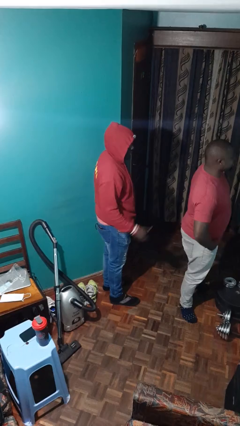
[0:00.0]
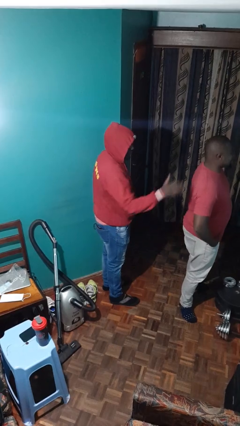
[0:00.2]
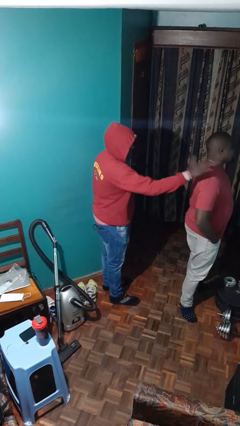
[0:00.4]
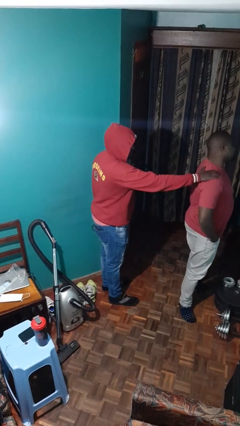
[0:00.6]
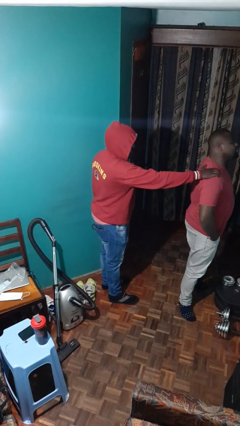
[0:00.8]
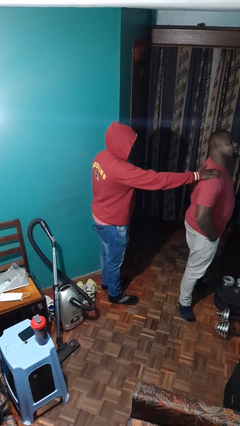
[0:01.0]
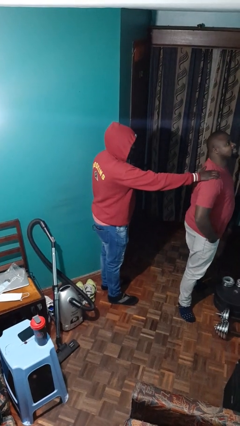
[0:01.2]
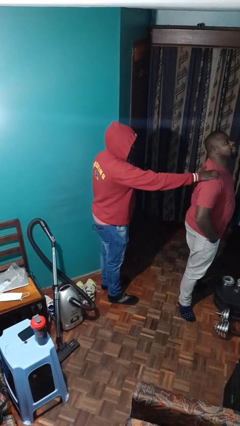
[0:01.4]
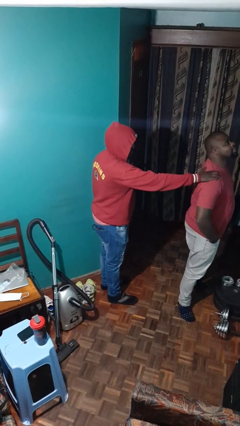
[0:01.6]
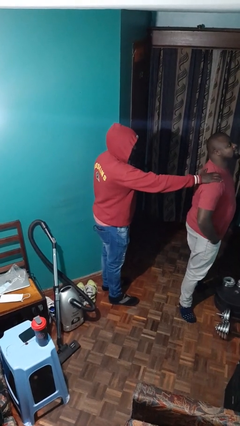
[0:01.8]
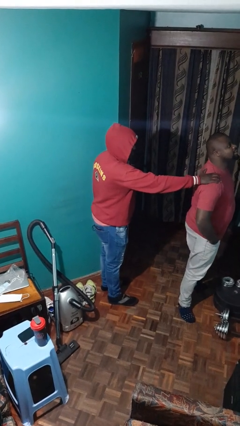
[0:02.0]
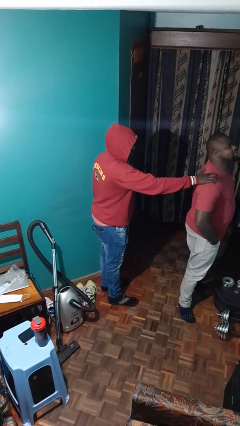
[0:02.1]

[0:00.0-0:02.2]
person grabs person by shoulder

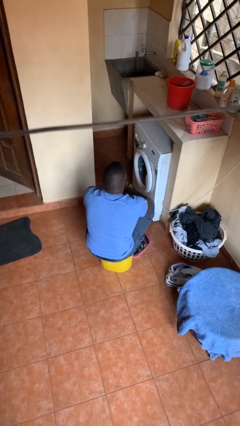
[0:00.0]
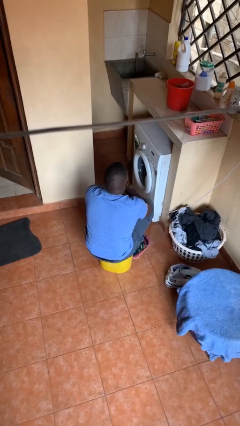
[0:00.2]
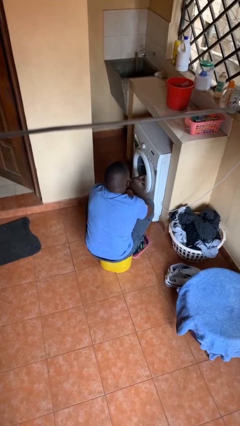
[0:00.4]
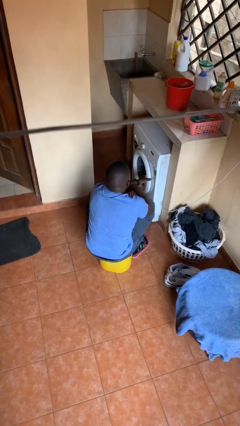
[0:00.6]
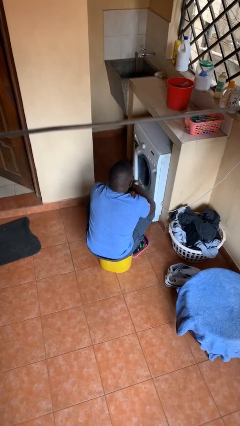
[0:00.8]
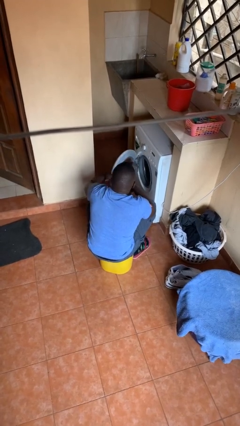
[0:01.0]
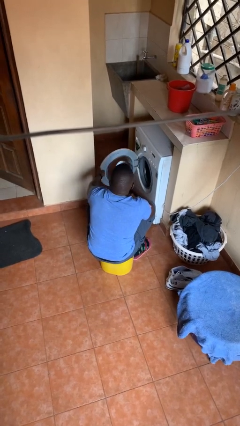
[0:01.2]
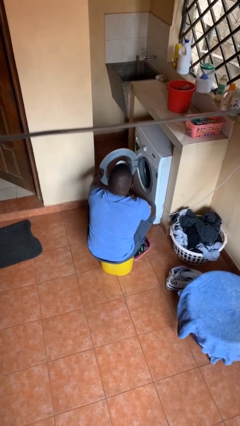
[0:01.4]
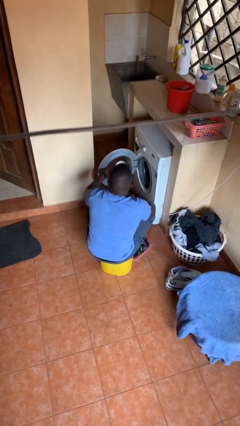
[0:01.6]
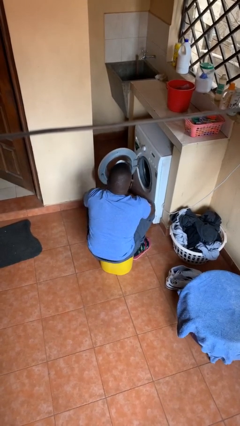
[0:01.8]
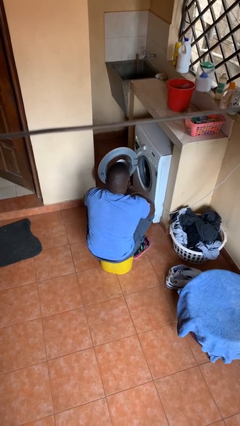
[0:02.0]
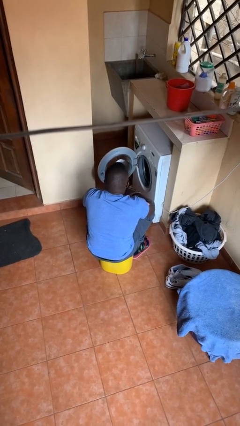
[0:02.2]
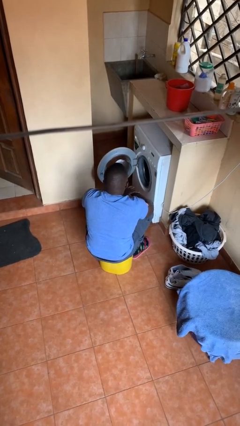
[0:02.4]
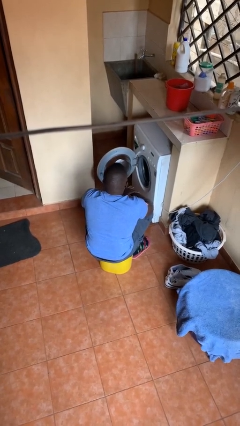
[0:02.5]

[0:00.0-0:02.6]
person opens clothes washer

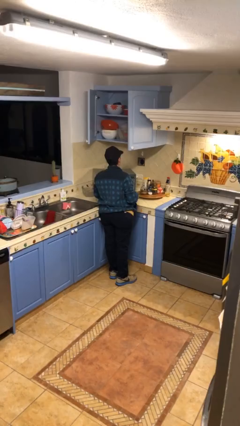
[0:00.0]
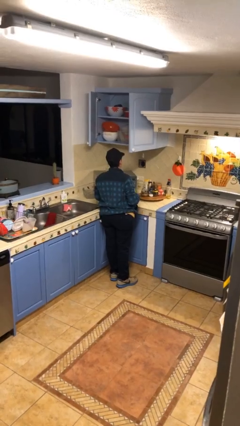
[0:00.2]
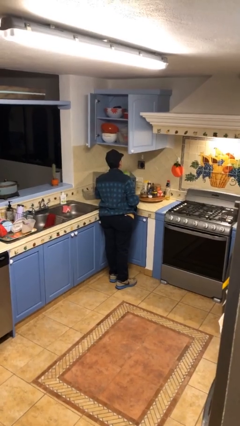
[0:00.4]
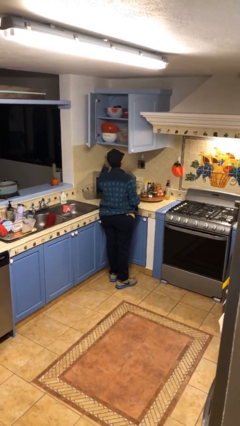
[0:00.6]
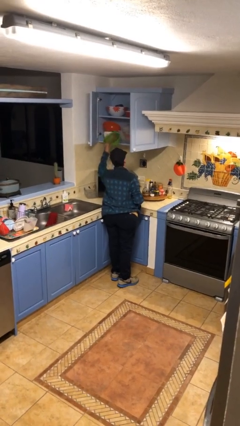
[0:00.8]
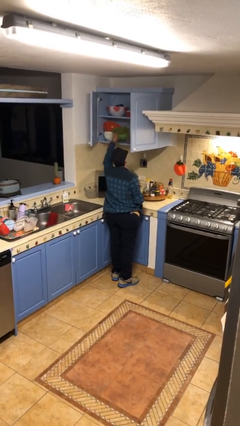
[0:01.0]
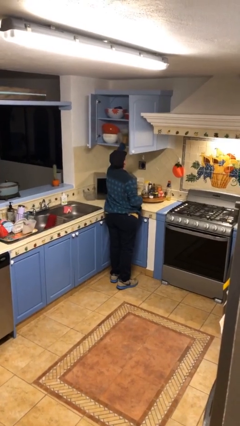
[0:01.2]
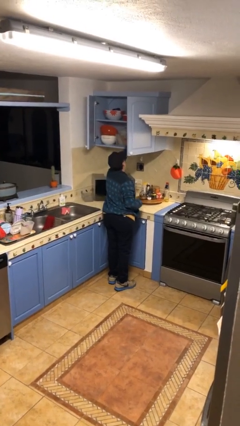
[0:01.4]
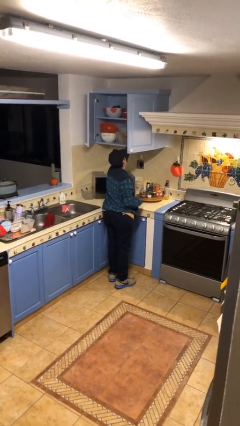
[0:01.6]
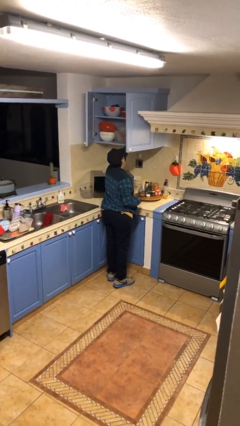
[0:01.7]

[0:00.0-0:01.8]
person puts object in cabinet

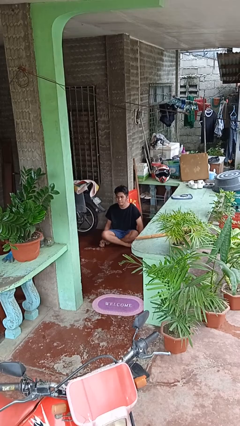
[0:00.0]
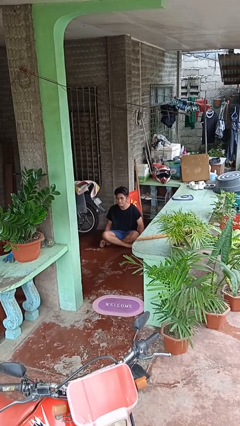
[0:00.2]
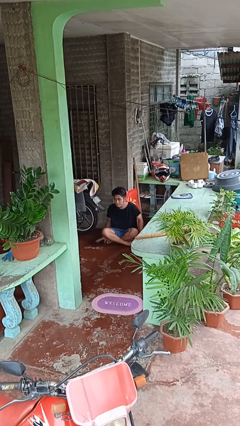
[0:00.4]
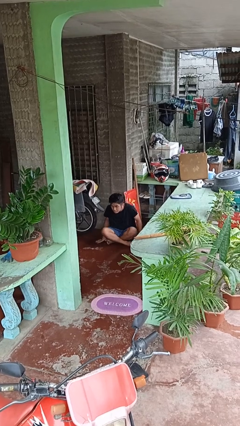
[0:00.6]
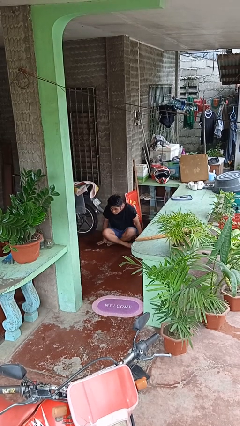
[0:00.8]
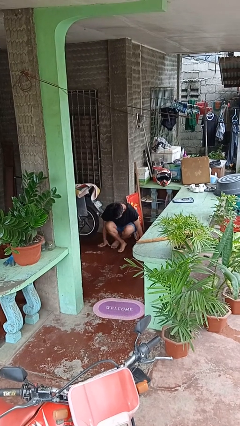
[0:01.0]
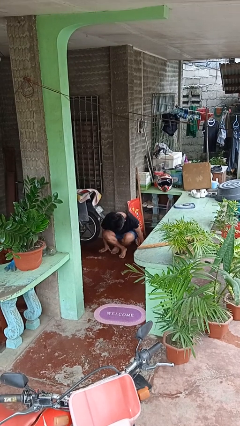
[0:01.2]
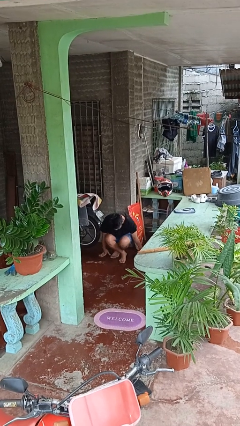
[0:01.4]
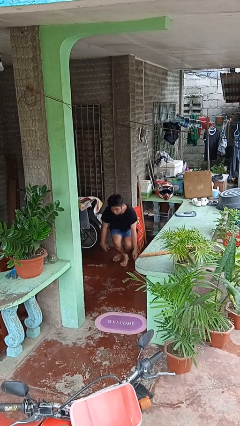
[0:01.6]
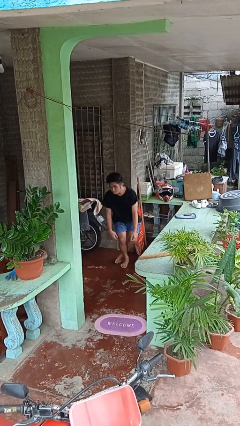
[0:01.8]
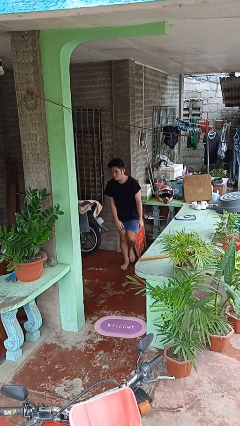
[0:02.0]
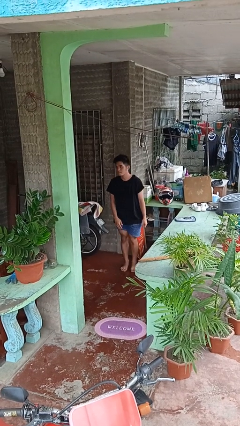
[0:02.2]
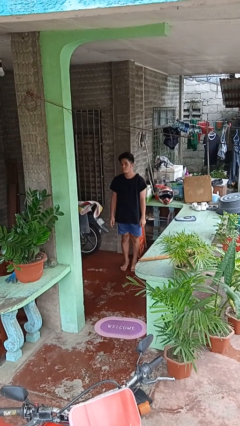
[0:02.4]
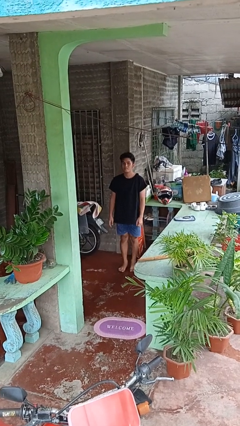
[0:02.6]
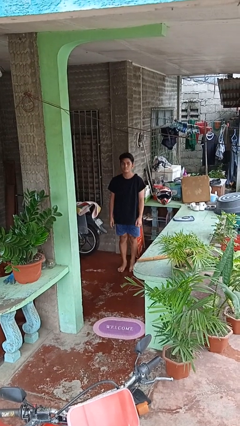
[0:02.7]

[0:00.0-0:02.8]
person stands up from floor

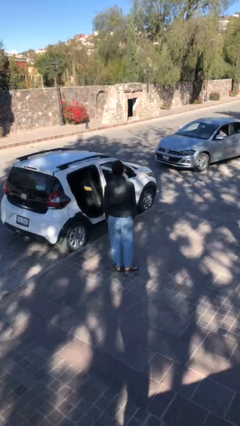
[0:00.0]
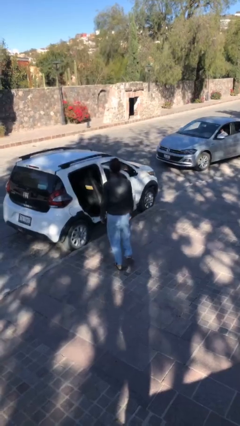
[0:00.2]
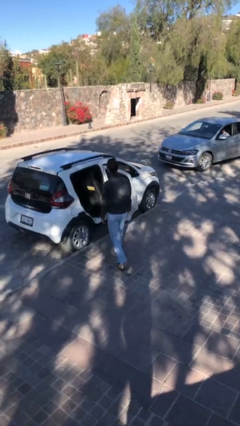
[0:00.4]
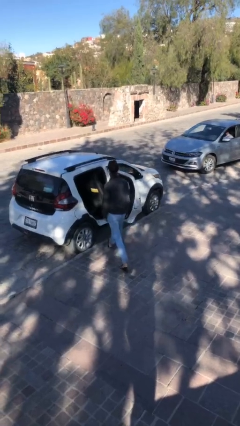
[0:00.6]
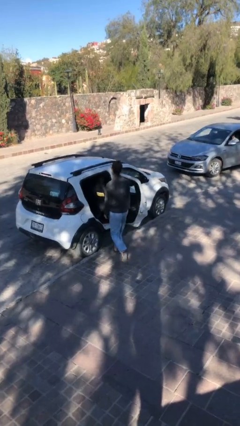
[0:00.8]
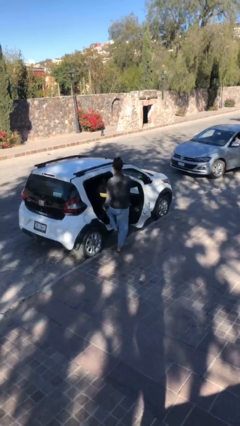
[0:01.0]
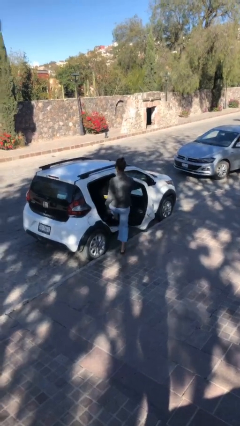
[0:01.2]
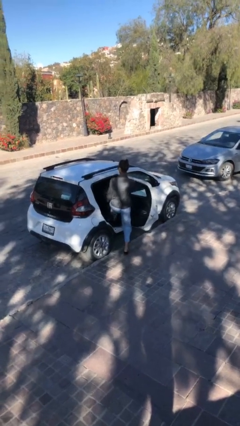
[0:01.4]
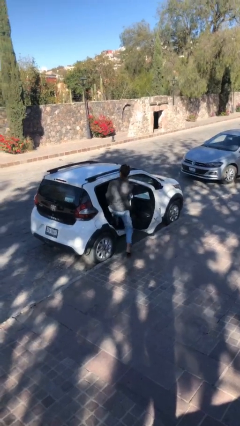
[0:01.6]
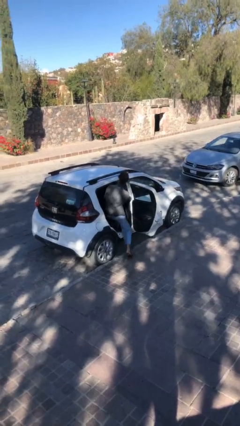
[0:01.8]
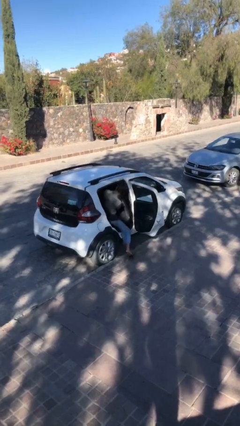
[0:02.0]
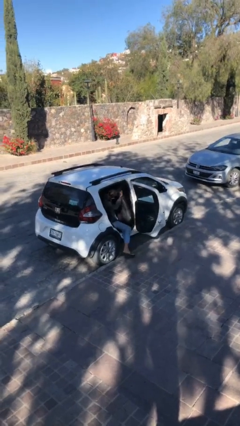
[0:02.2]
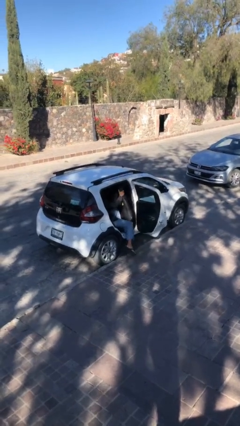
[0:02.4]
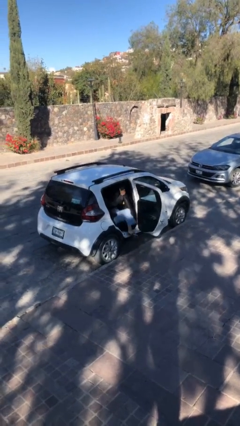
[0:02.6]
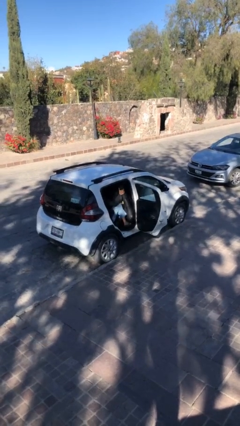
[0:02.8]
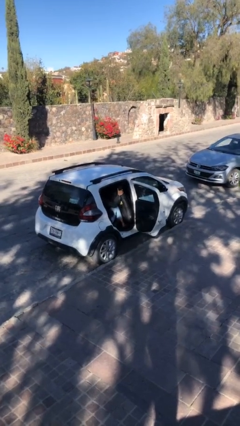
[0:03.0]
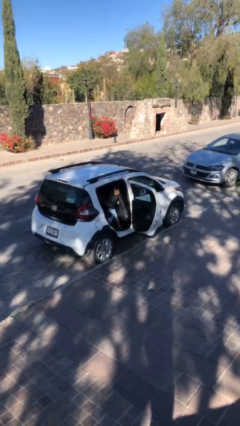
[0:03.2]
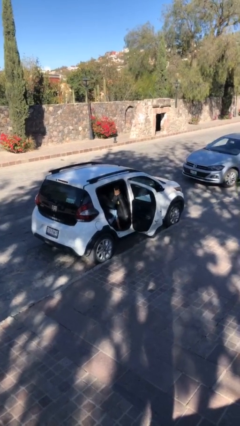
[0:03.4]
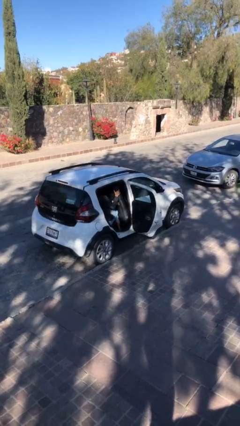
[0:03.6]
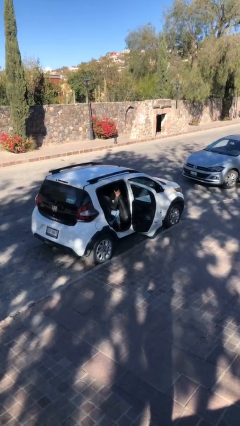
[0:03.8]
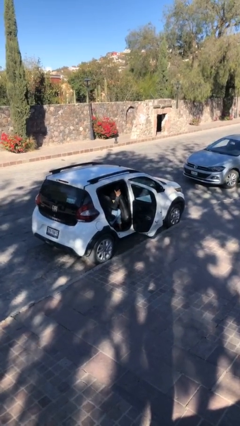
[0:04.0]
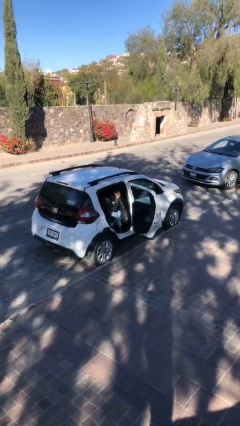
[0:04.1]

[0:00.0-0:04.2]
person enters car

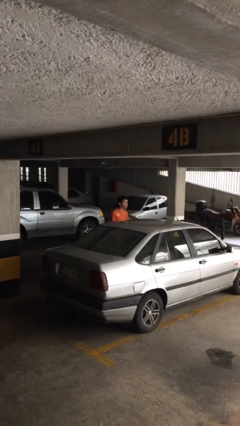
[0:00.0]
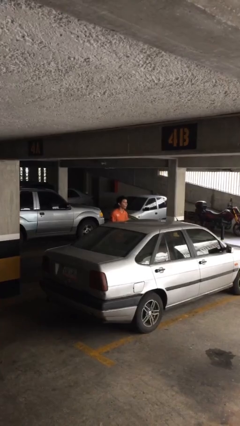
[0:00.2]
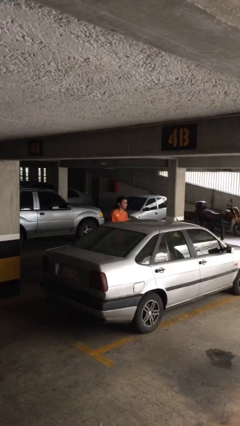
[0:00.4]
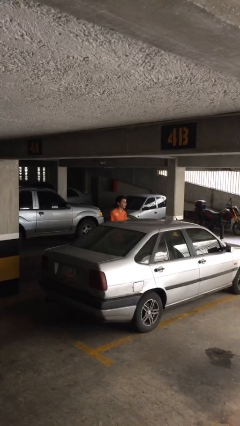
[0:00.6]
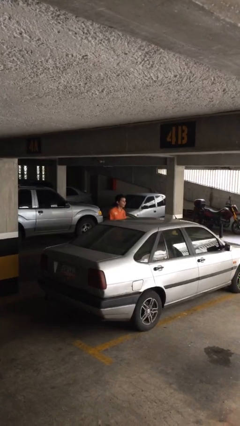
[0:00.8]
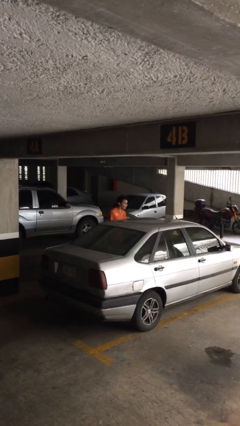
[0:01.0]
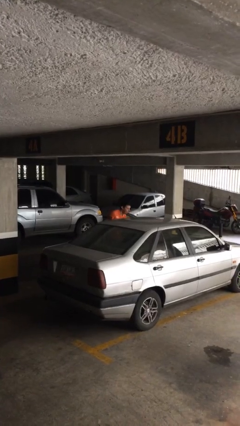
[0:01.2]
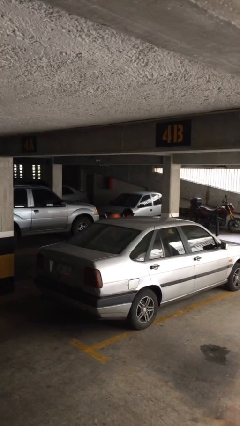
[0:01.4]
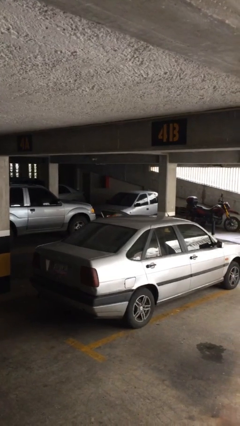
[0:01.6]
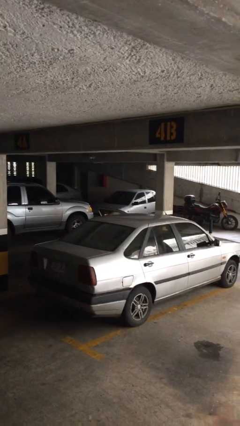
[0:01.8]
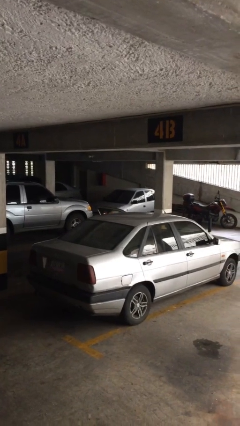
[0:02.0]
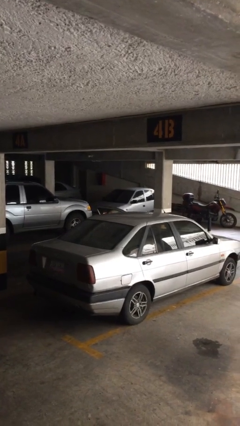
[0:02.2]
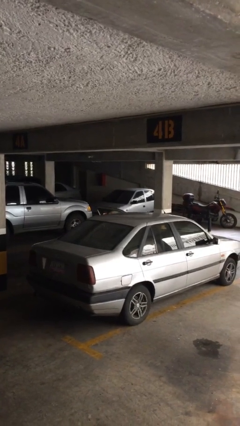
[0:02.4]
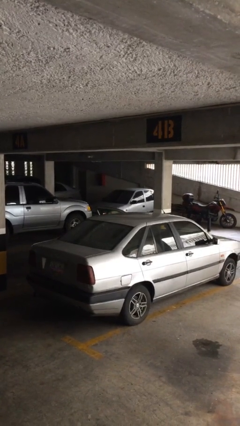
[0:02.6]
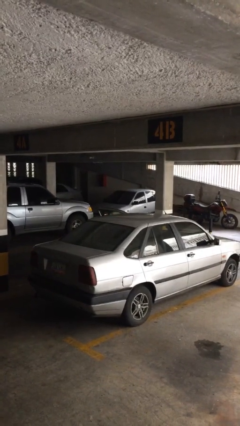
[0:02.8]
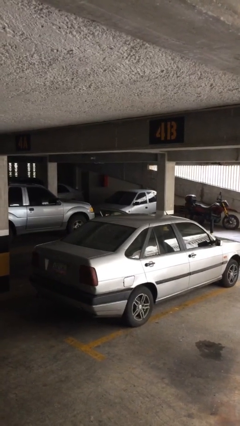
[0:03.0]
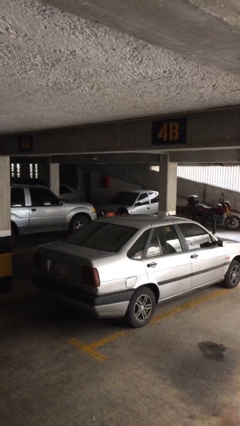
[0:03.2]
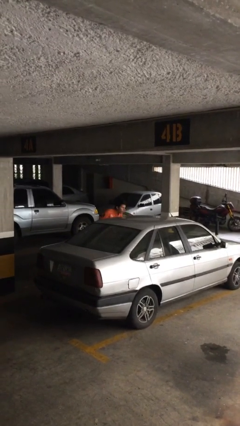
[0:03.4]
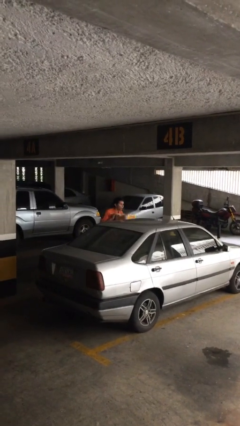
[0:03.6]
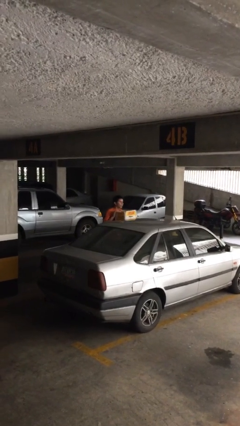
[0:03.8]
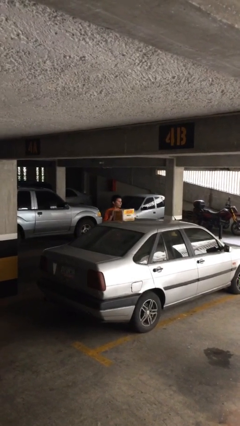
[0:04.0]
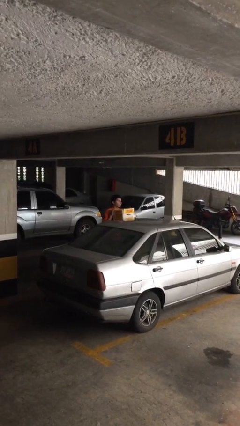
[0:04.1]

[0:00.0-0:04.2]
person unloads car
